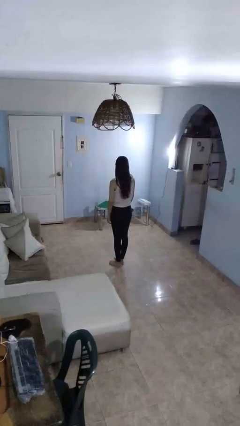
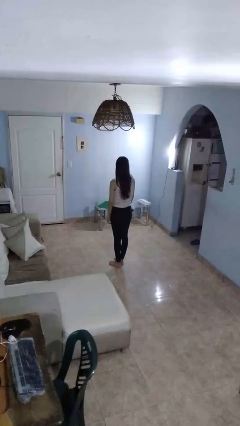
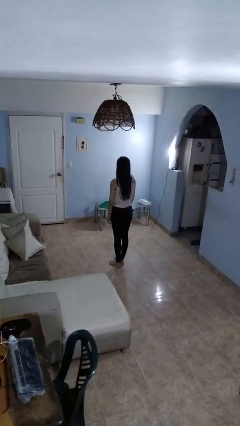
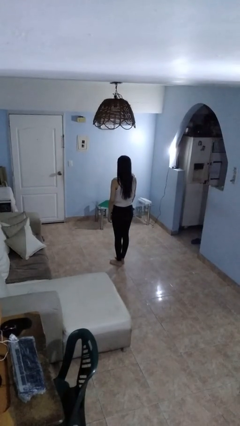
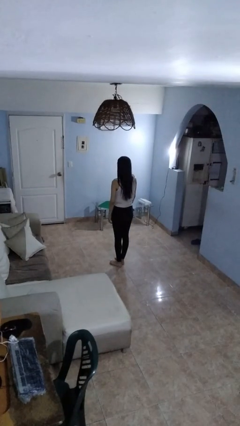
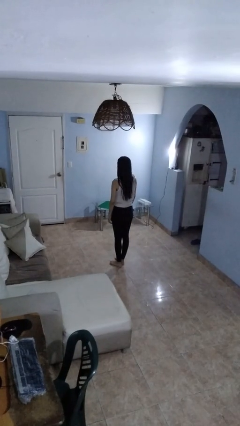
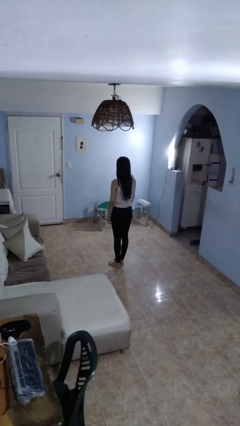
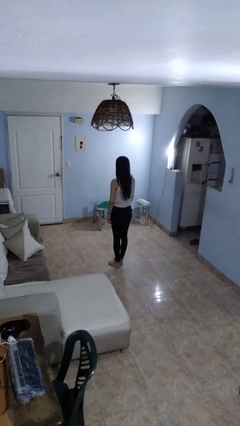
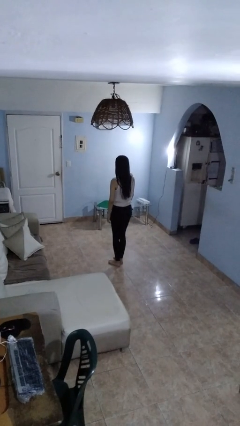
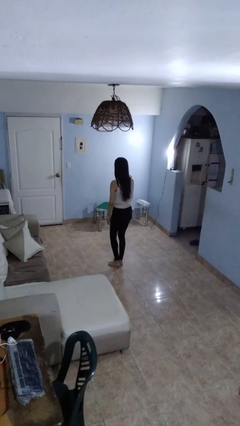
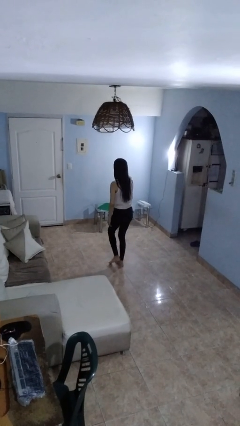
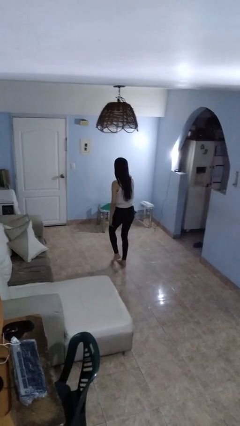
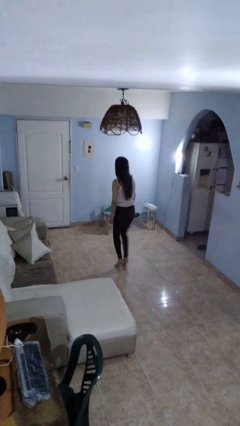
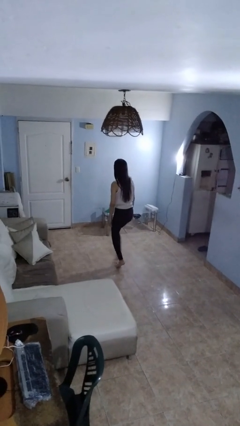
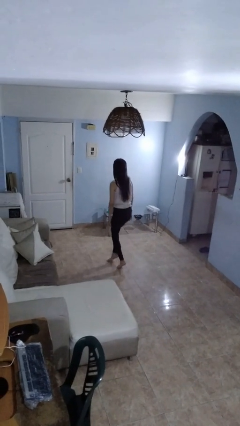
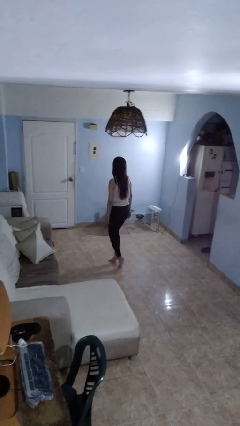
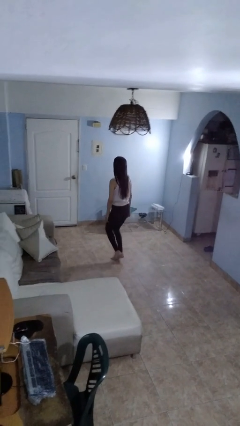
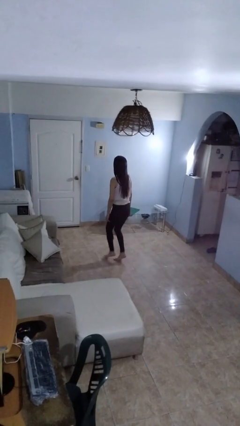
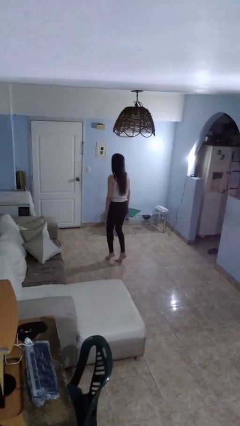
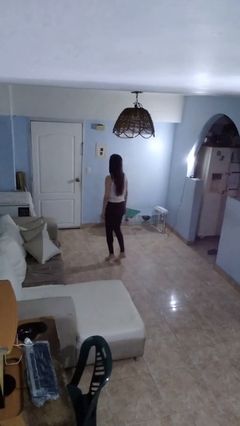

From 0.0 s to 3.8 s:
person walks tiptoe

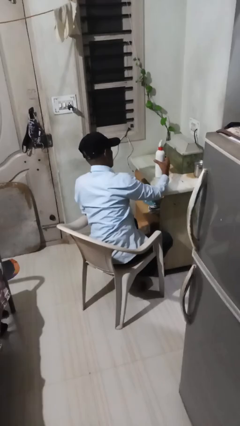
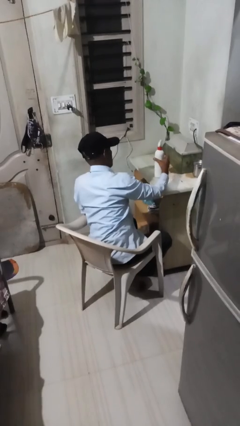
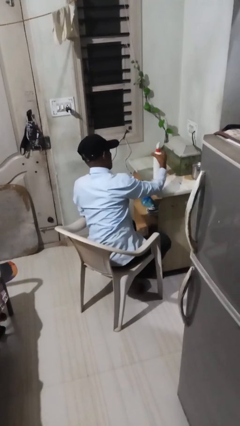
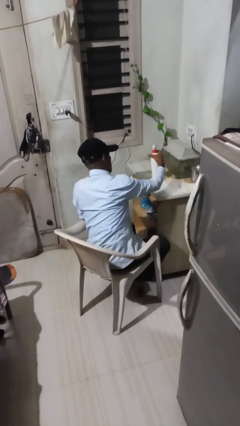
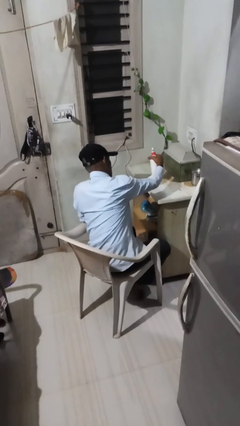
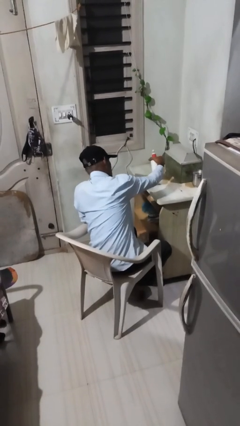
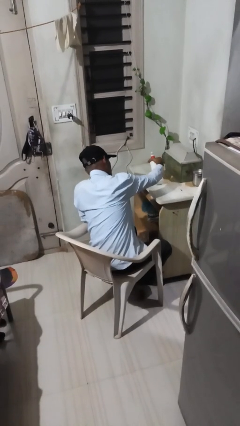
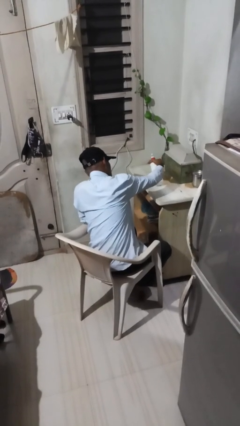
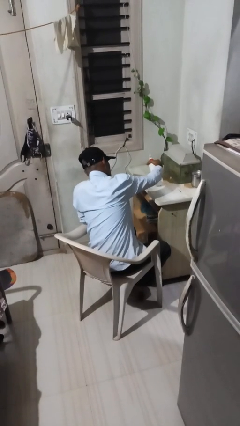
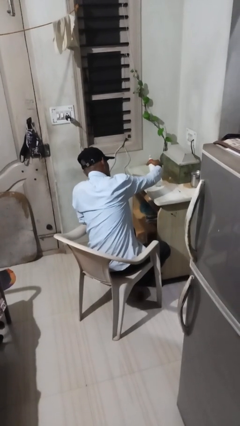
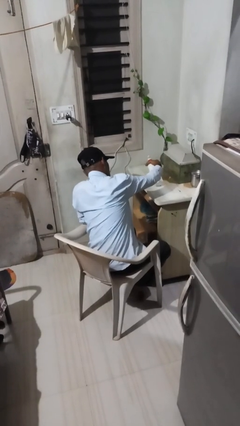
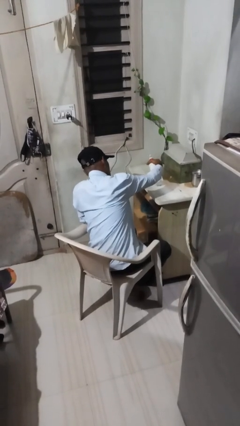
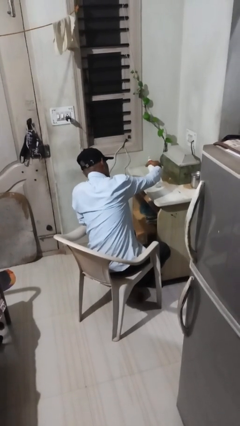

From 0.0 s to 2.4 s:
person sprays from bottle

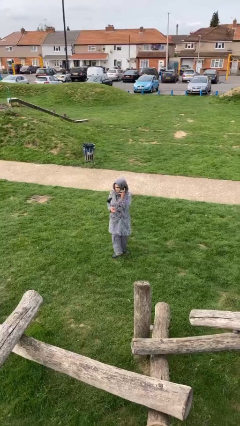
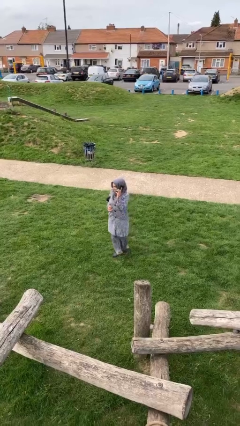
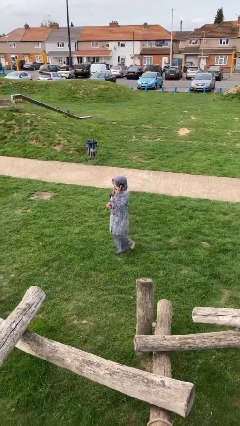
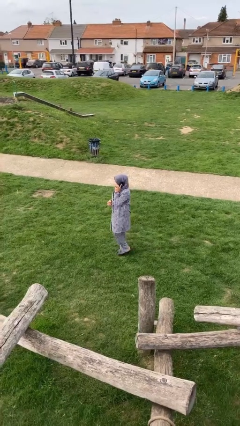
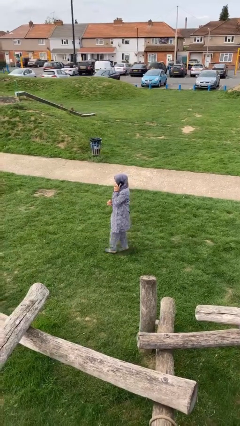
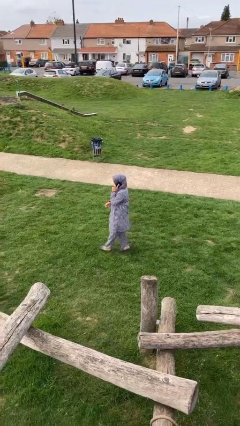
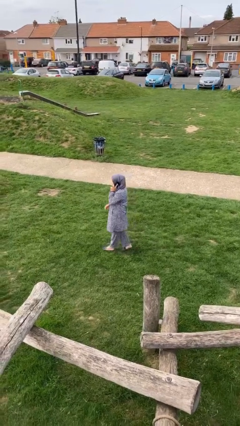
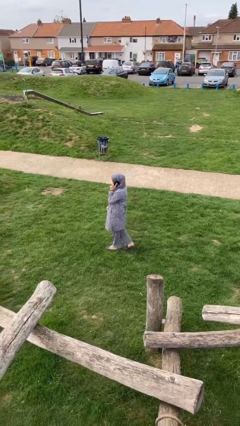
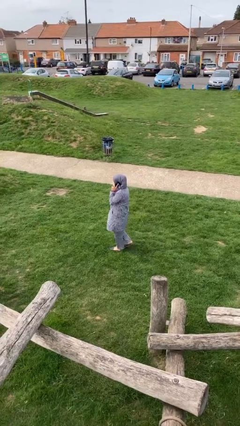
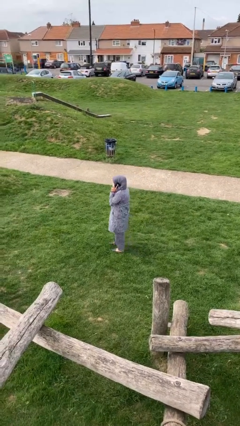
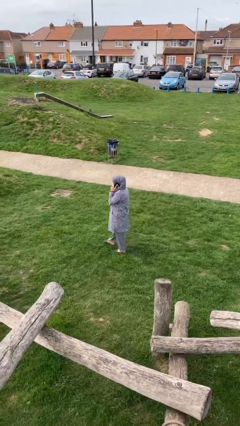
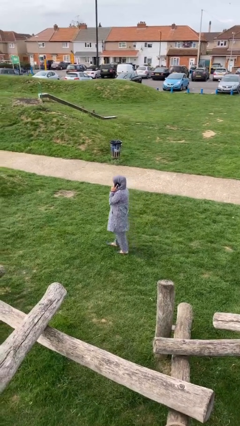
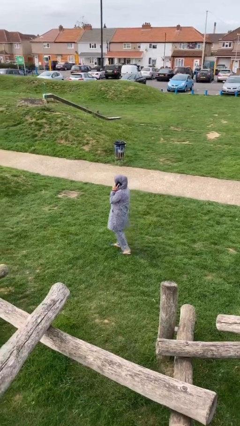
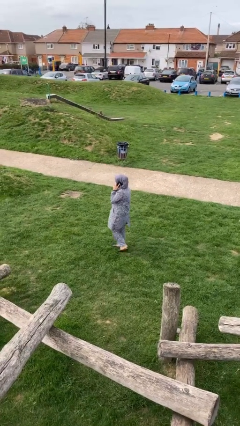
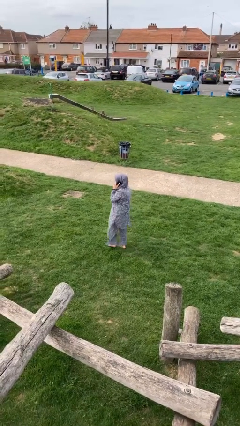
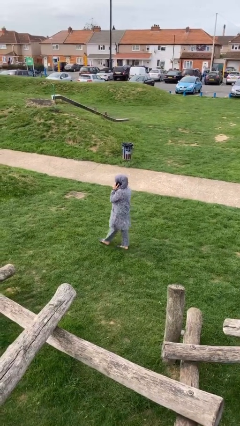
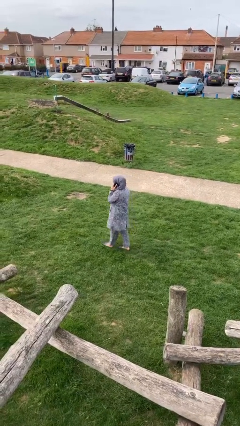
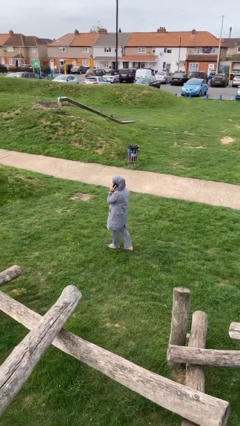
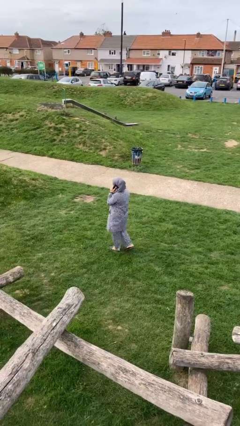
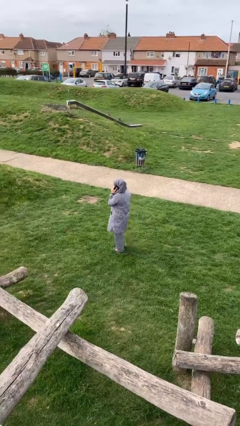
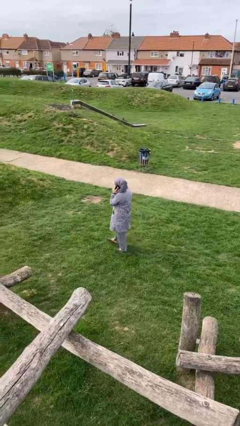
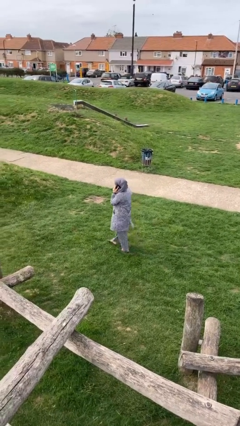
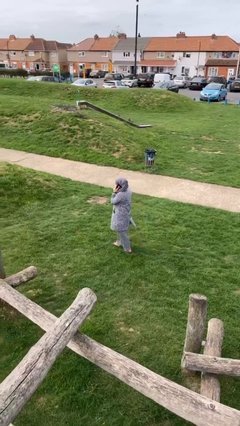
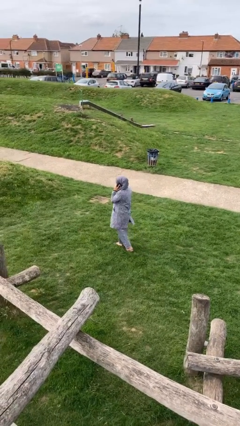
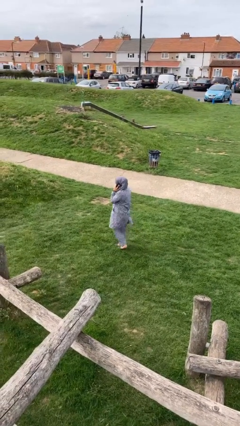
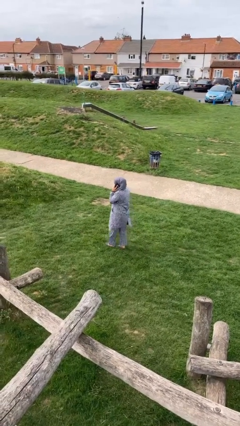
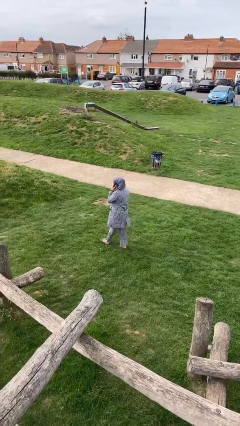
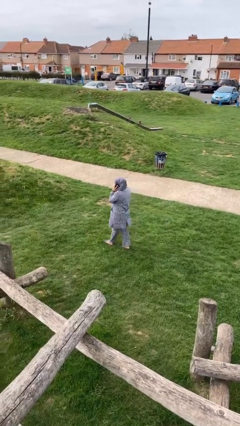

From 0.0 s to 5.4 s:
person talks on phone

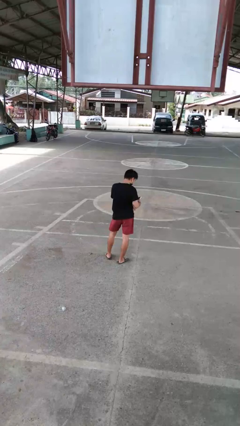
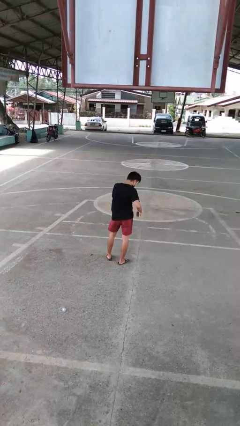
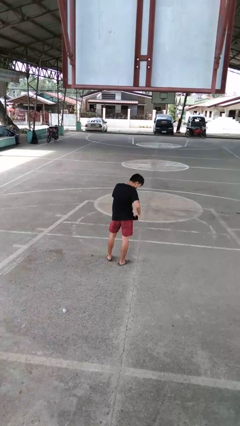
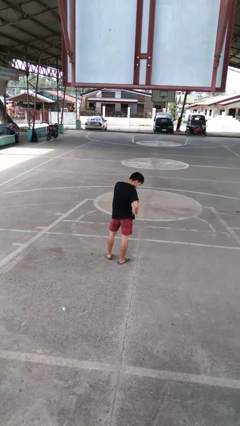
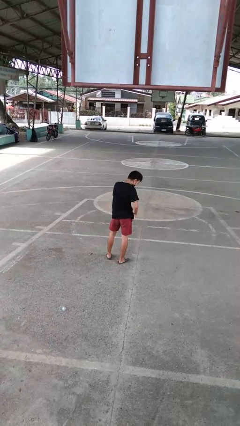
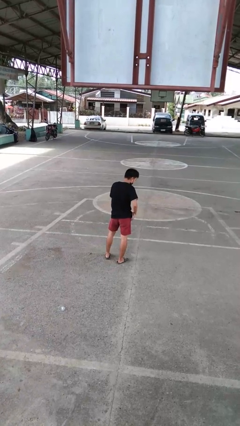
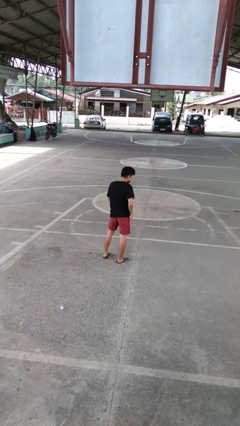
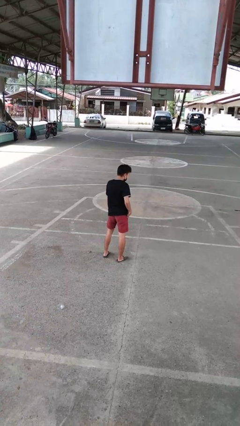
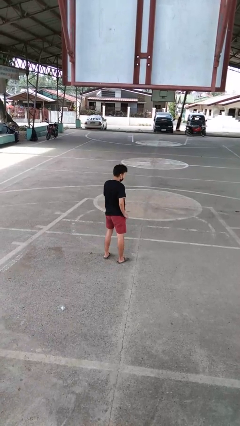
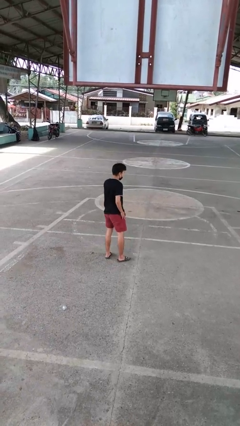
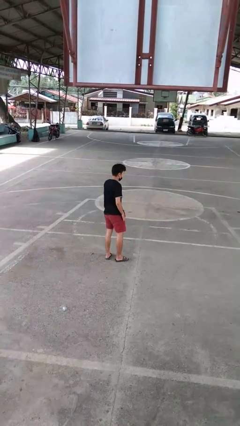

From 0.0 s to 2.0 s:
person puts phone into pocket

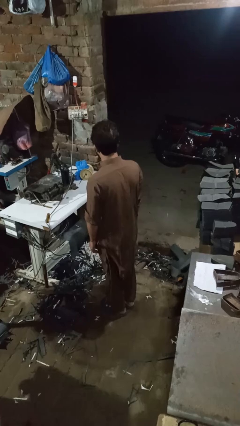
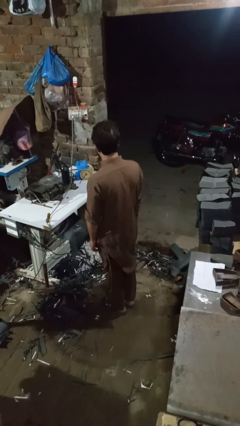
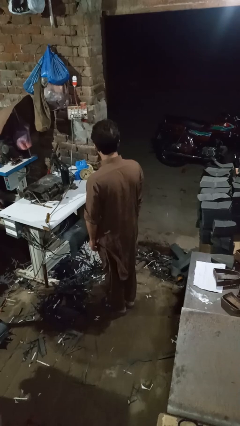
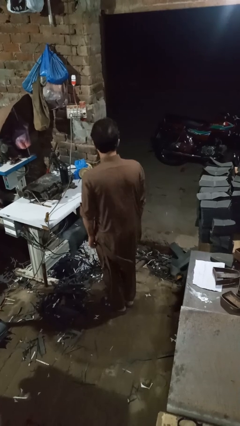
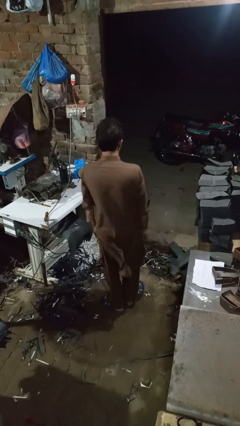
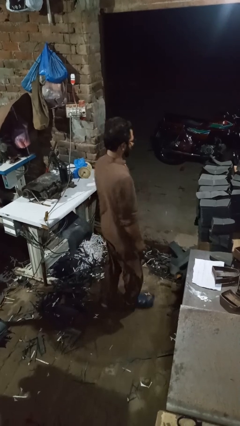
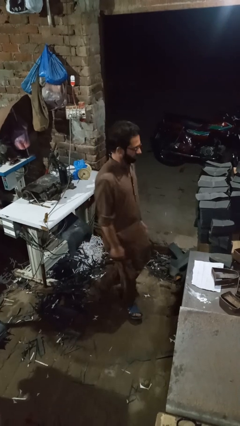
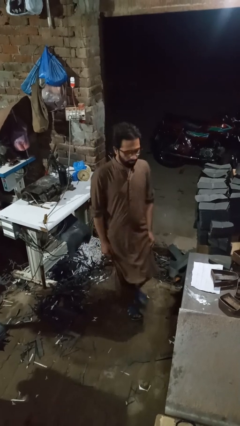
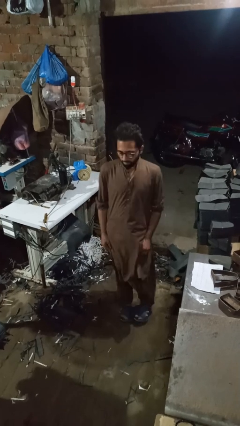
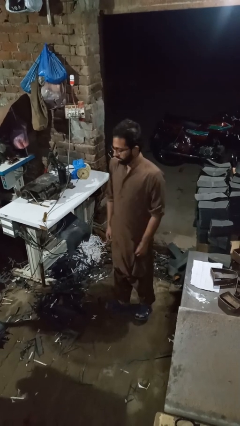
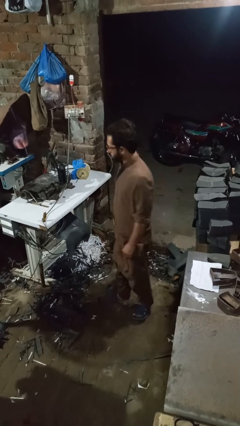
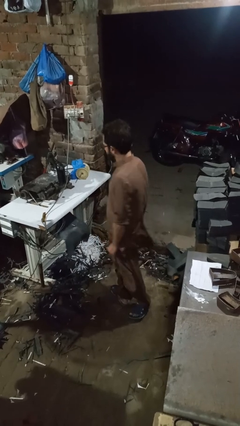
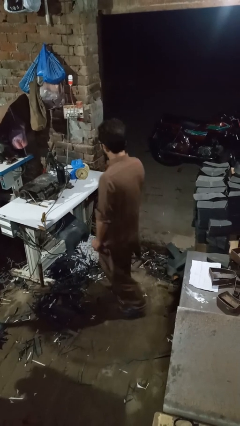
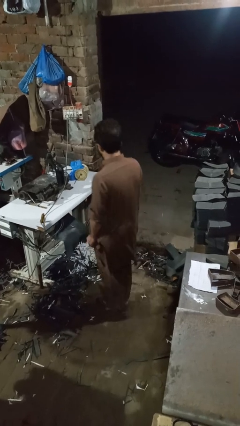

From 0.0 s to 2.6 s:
person twirls

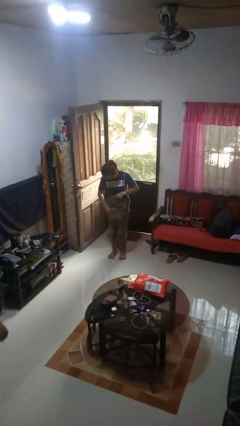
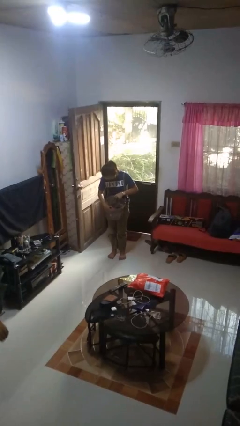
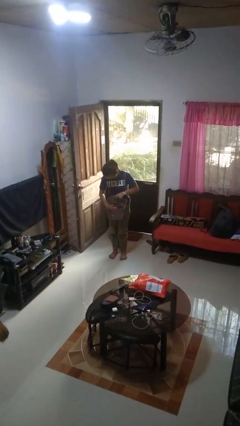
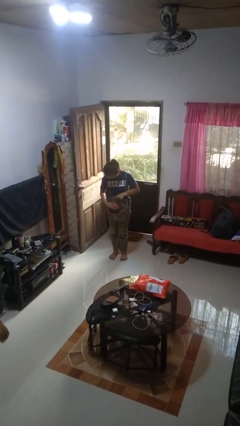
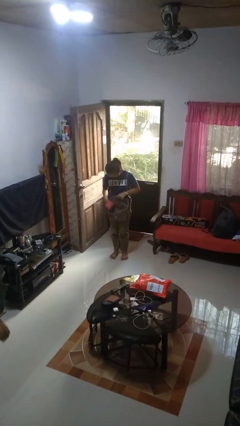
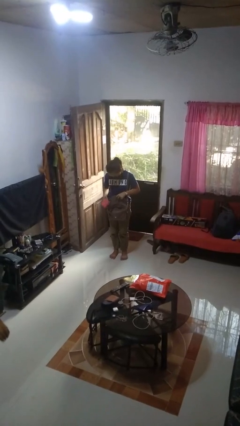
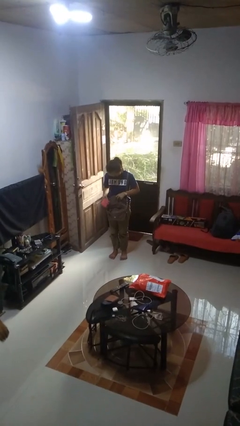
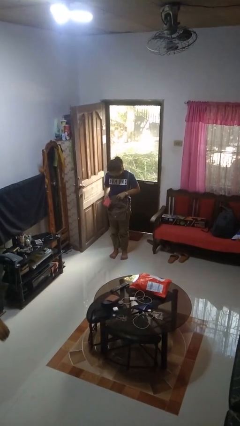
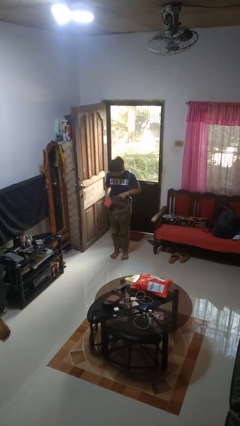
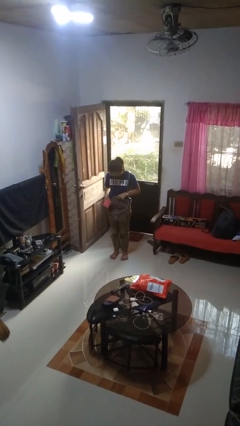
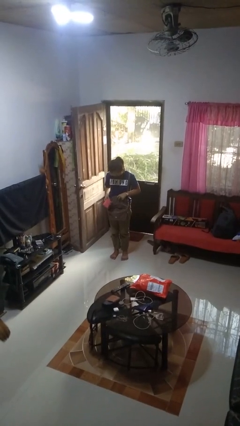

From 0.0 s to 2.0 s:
person takes object from purse
